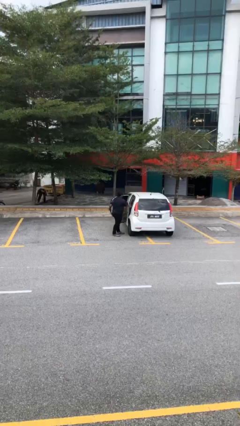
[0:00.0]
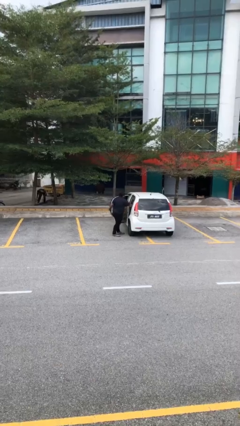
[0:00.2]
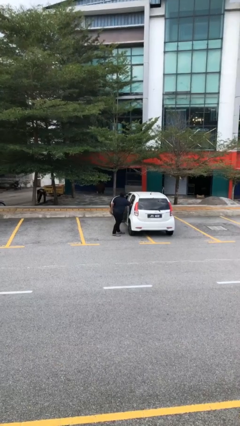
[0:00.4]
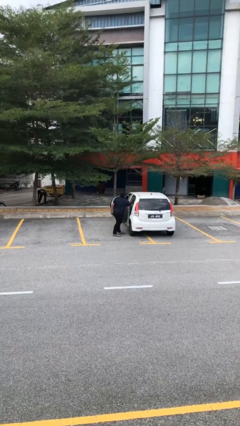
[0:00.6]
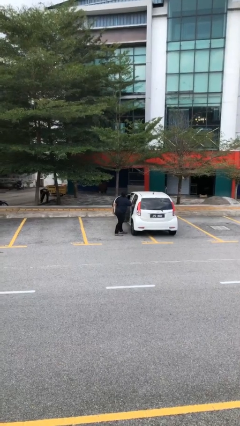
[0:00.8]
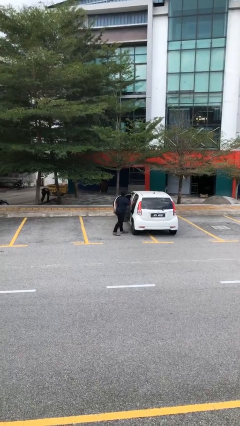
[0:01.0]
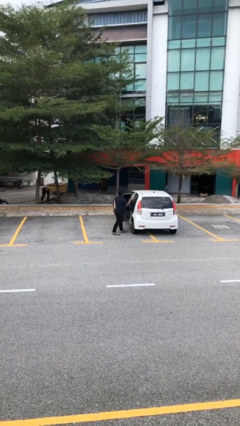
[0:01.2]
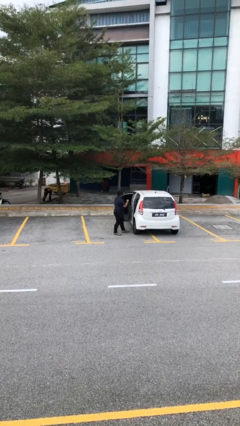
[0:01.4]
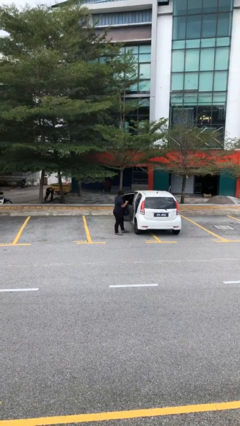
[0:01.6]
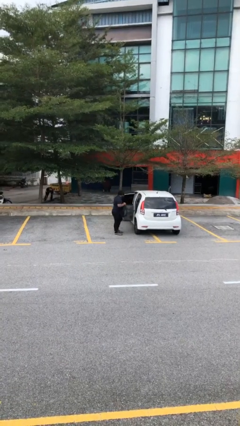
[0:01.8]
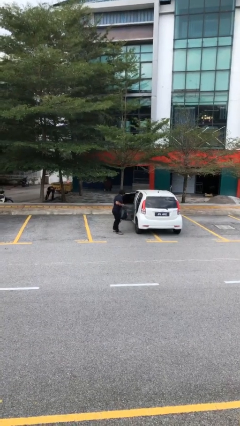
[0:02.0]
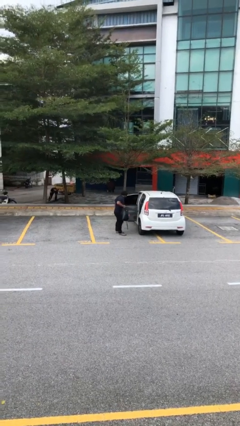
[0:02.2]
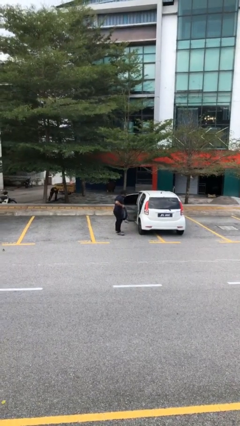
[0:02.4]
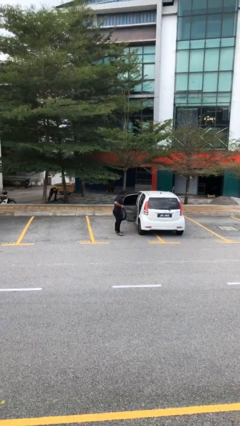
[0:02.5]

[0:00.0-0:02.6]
person unloads car

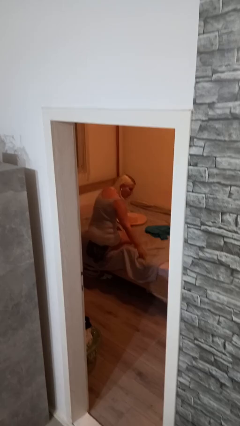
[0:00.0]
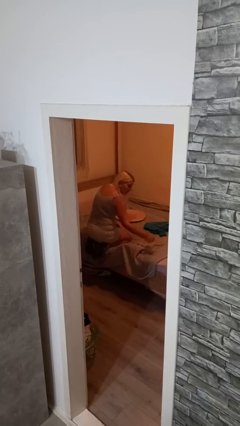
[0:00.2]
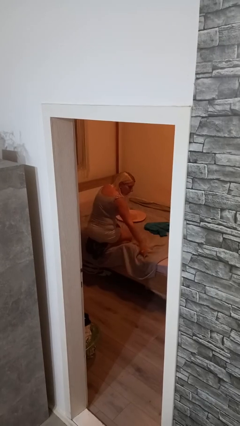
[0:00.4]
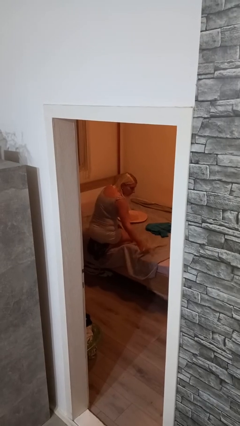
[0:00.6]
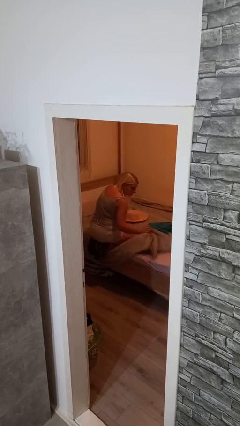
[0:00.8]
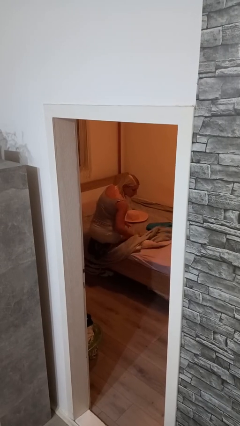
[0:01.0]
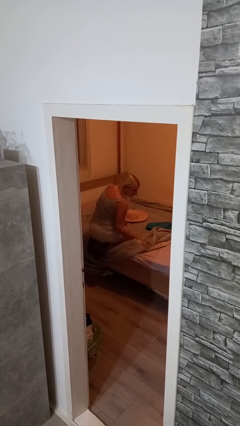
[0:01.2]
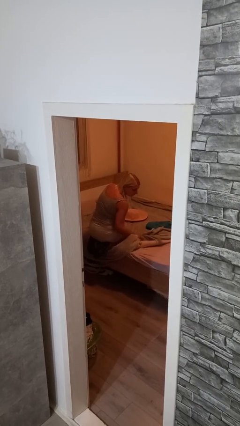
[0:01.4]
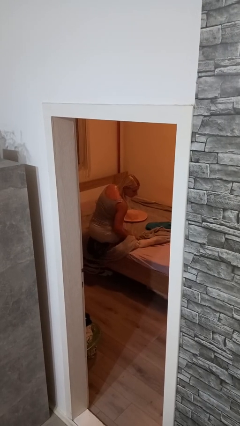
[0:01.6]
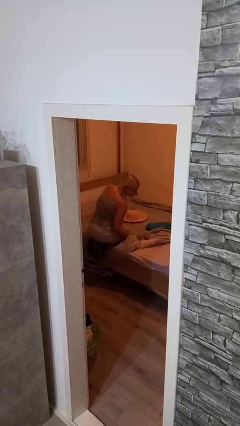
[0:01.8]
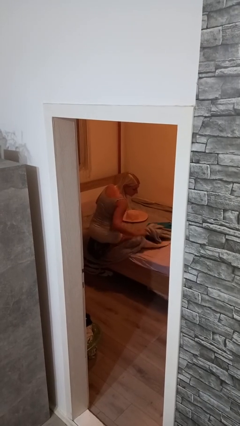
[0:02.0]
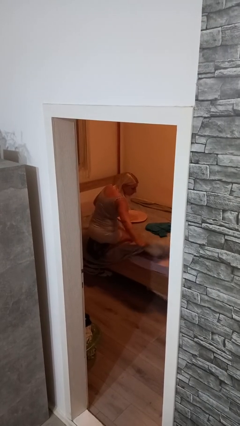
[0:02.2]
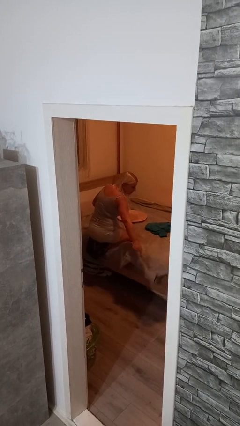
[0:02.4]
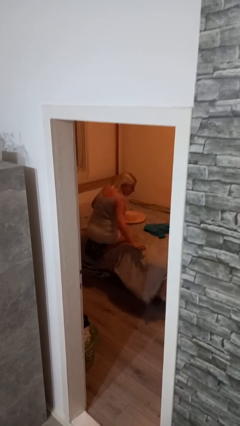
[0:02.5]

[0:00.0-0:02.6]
person searches under bed

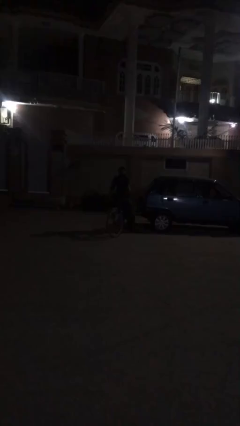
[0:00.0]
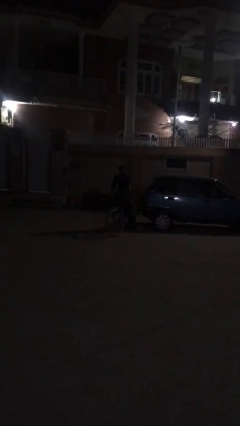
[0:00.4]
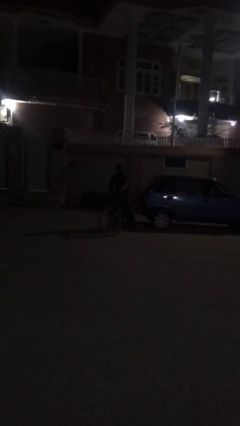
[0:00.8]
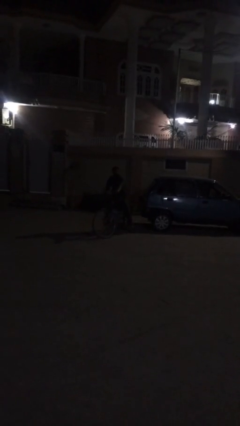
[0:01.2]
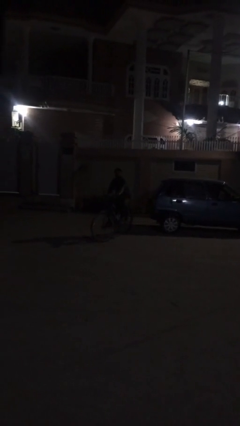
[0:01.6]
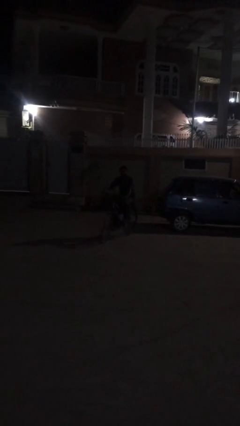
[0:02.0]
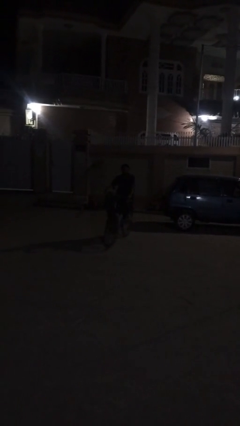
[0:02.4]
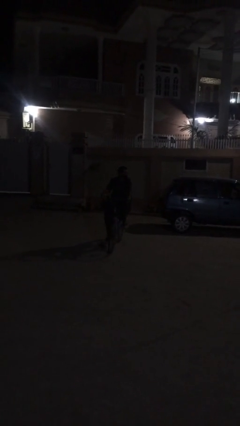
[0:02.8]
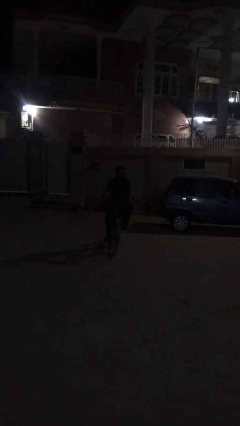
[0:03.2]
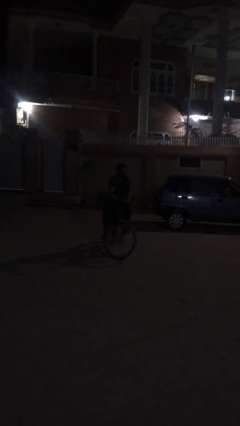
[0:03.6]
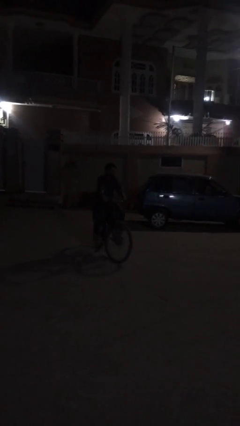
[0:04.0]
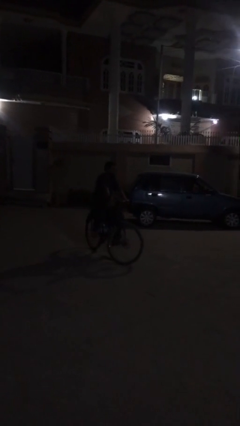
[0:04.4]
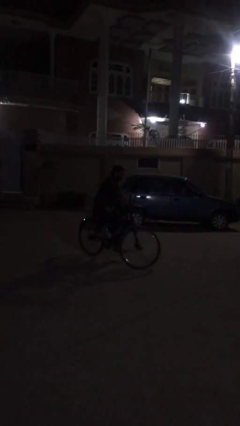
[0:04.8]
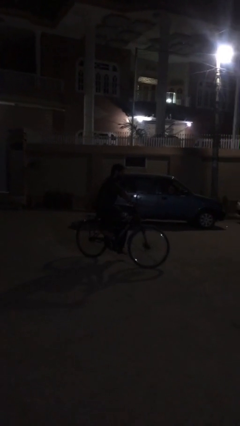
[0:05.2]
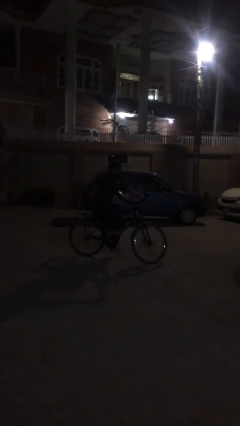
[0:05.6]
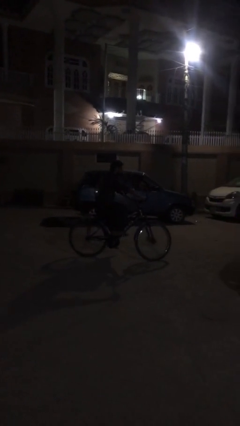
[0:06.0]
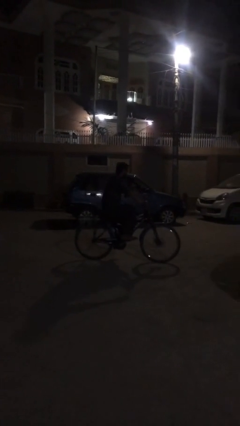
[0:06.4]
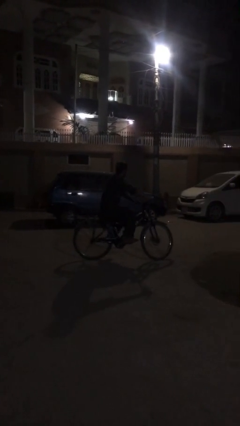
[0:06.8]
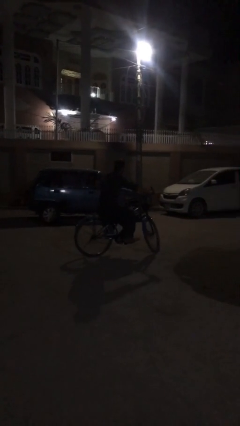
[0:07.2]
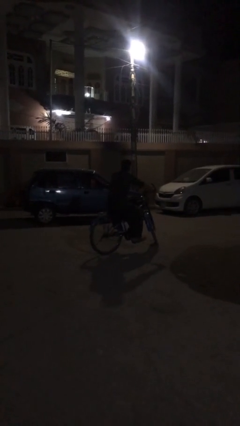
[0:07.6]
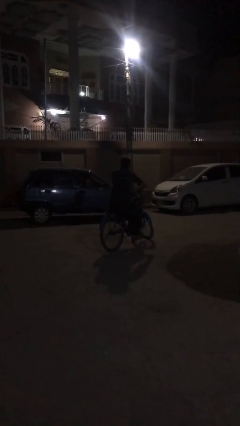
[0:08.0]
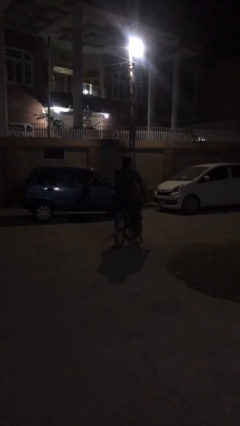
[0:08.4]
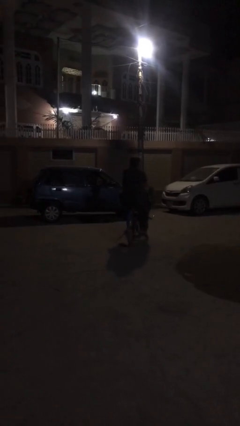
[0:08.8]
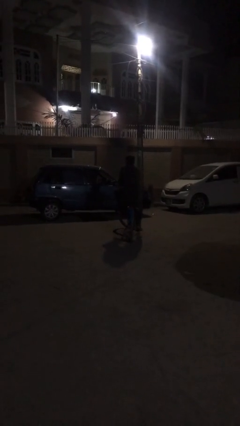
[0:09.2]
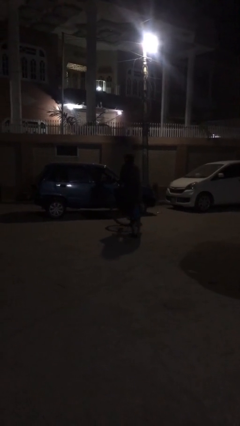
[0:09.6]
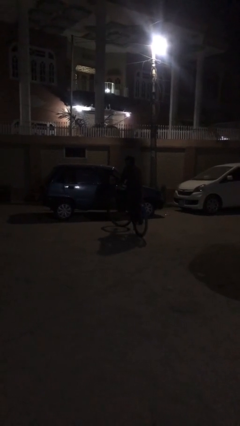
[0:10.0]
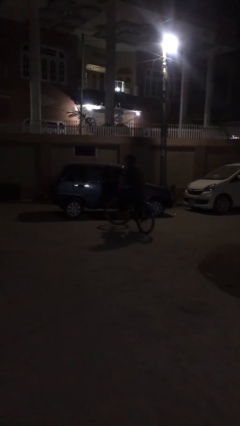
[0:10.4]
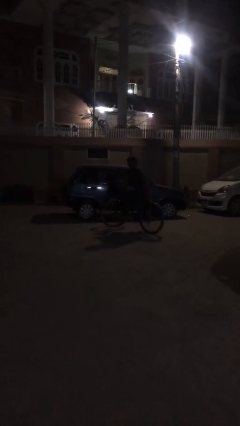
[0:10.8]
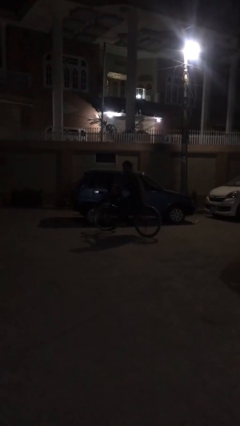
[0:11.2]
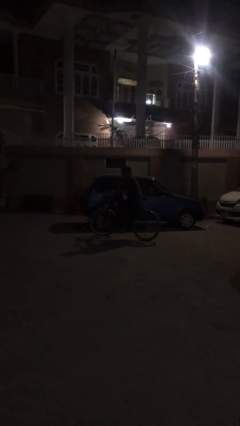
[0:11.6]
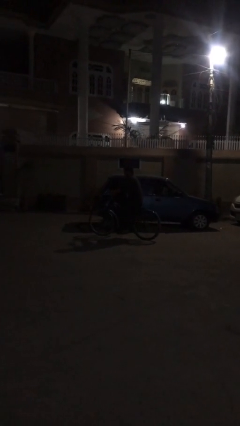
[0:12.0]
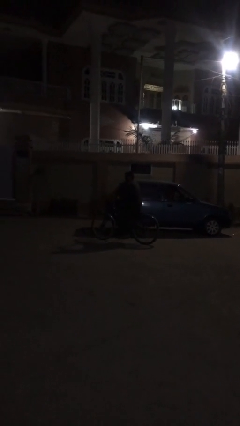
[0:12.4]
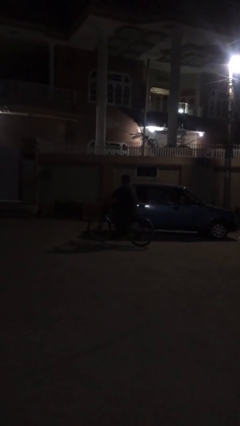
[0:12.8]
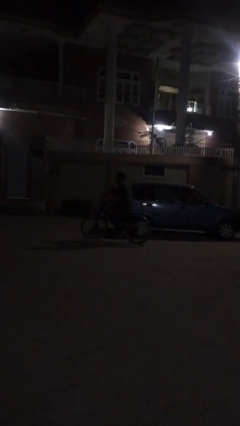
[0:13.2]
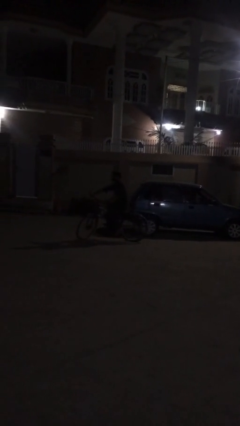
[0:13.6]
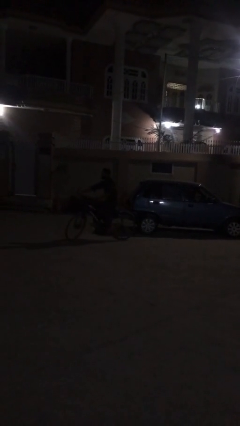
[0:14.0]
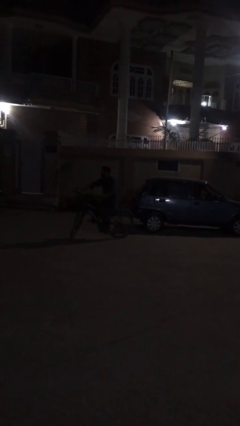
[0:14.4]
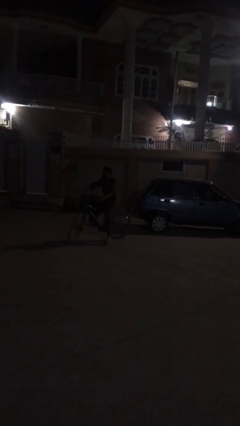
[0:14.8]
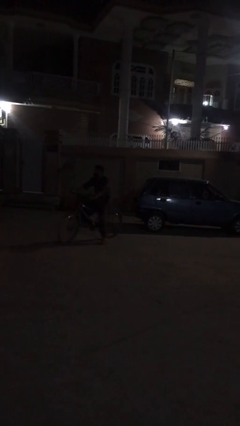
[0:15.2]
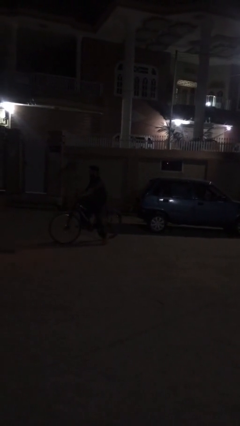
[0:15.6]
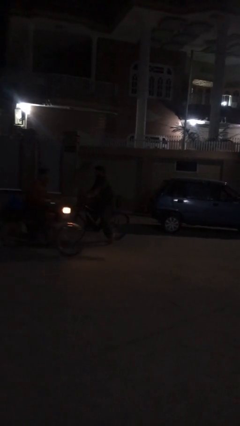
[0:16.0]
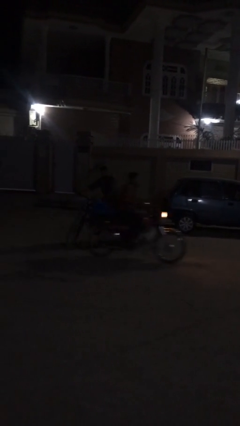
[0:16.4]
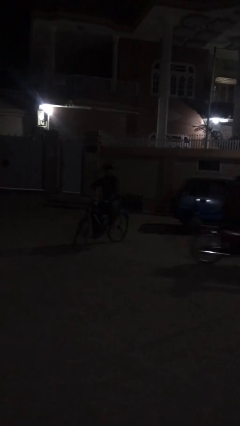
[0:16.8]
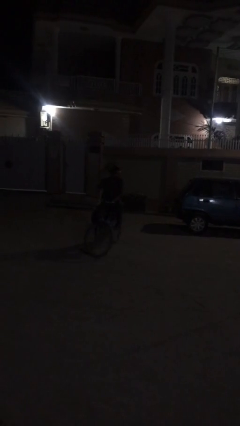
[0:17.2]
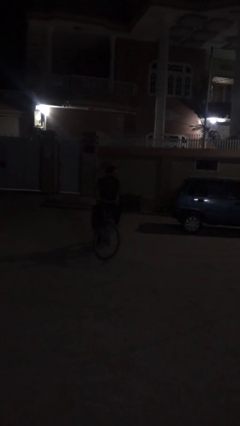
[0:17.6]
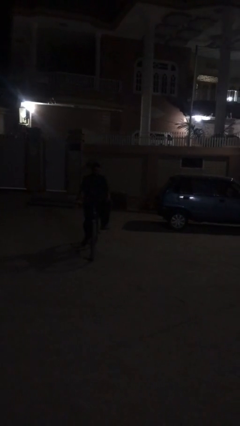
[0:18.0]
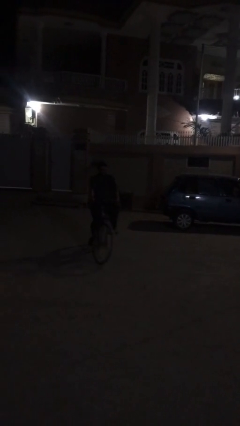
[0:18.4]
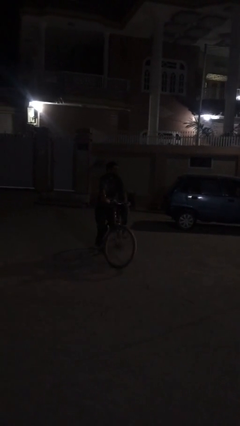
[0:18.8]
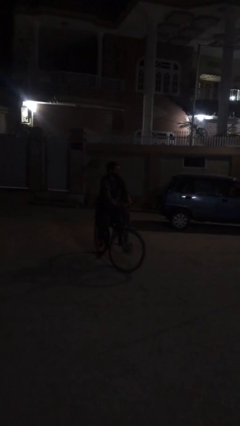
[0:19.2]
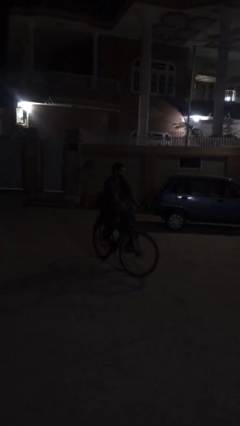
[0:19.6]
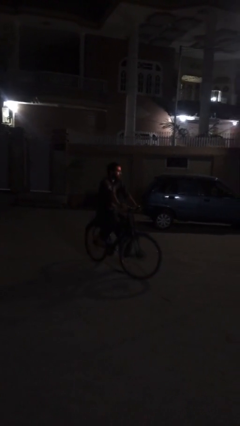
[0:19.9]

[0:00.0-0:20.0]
person rides bicycle

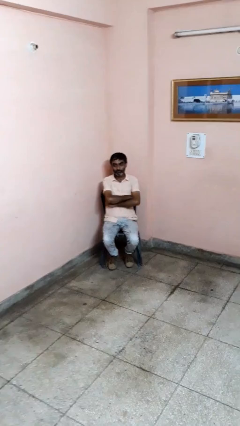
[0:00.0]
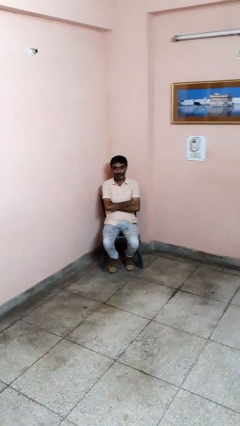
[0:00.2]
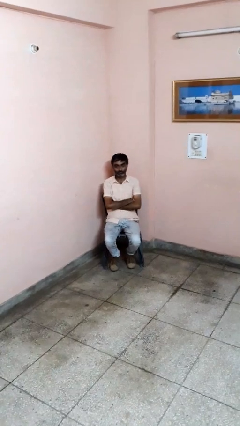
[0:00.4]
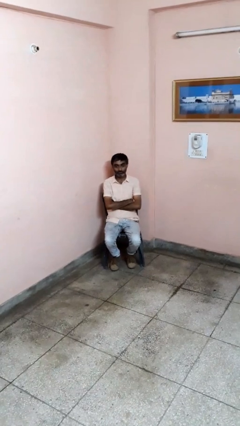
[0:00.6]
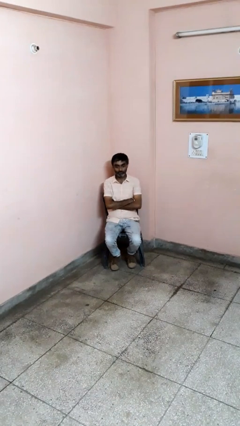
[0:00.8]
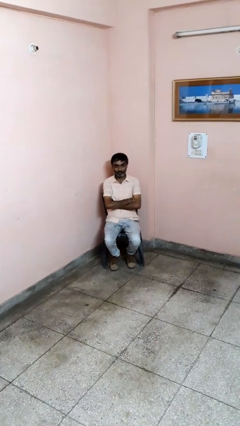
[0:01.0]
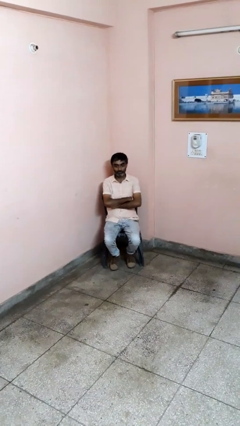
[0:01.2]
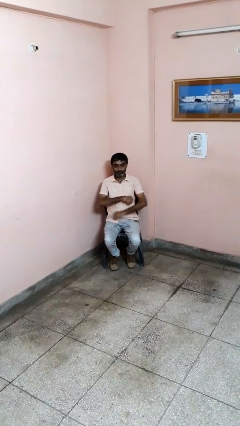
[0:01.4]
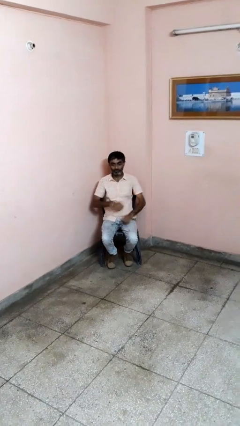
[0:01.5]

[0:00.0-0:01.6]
person crosses arms

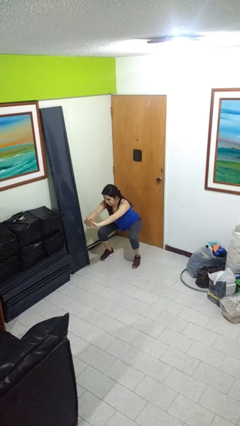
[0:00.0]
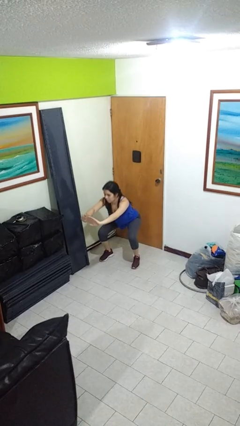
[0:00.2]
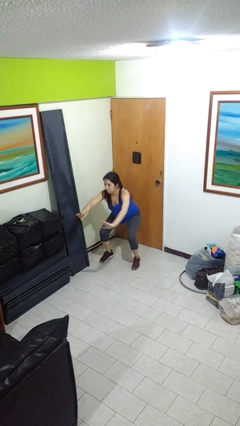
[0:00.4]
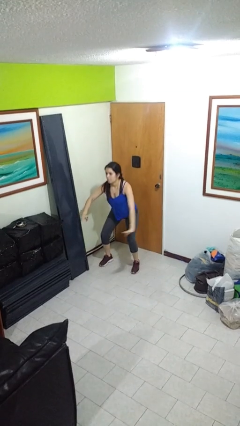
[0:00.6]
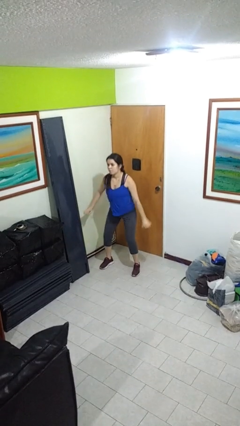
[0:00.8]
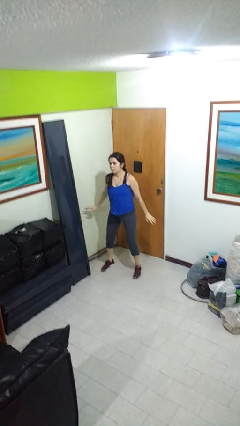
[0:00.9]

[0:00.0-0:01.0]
person stands up
